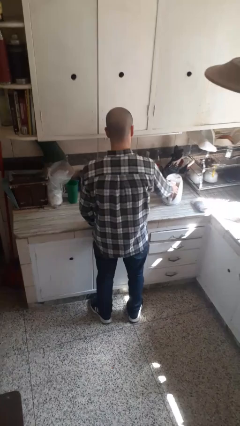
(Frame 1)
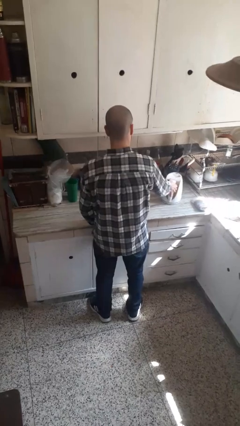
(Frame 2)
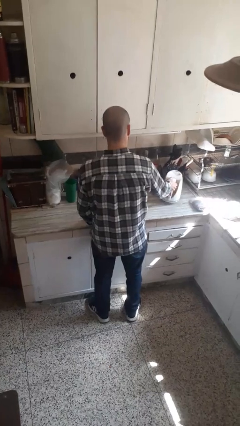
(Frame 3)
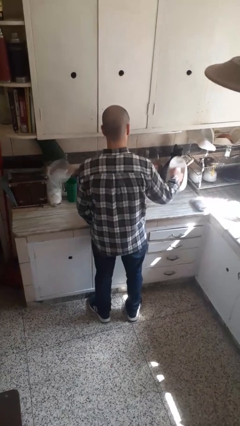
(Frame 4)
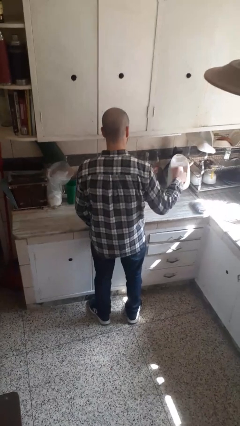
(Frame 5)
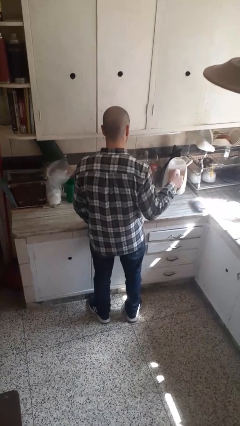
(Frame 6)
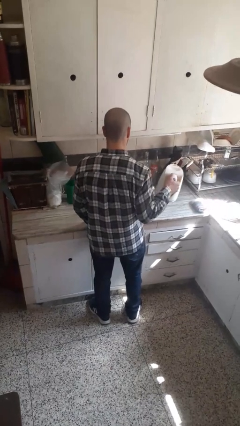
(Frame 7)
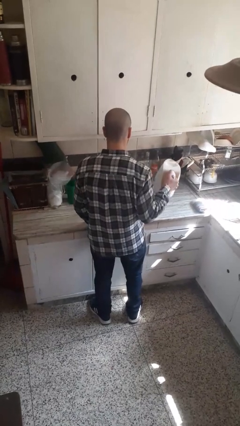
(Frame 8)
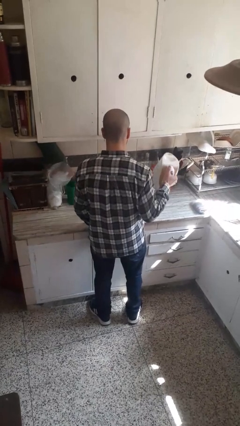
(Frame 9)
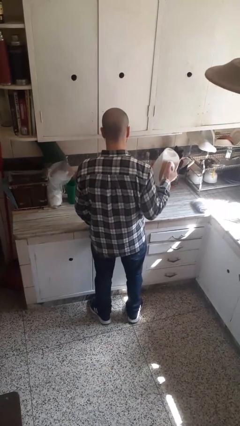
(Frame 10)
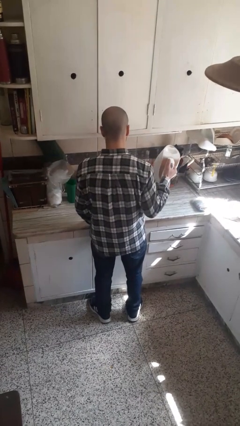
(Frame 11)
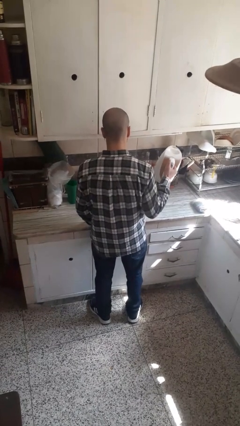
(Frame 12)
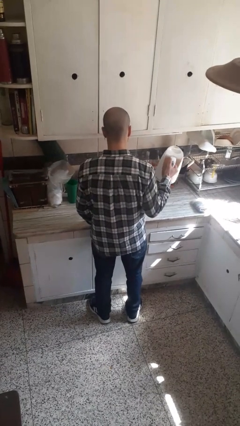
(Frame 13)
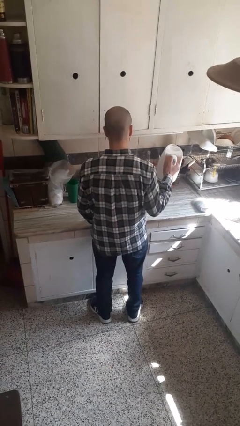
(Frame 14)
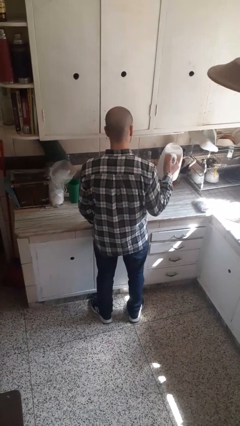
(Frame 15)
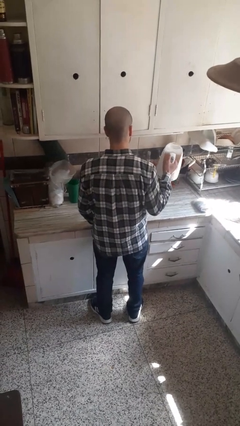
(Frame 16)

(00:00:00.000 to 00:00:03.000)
person picks up object from countertop

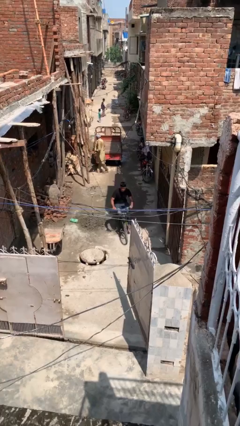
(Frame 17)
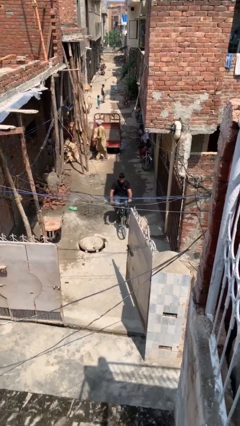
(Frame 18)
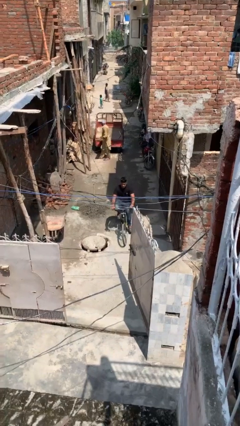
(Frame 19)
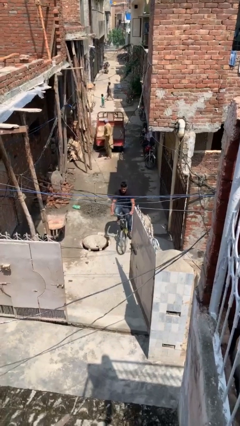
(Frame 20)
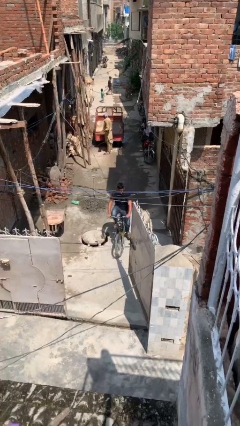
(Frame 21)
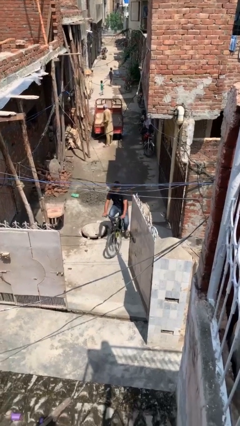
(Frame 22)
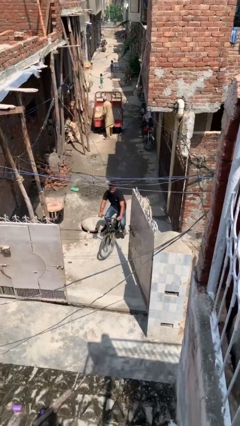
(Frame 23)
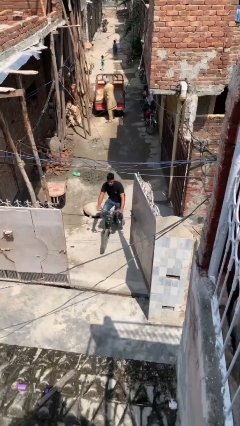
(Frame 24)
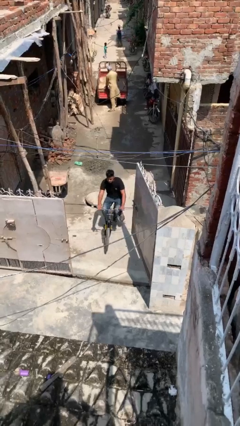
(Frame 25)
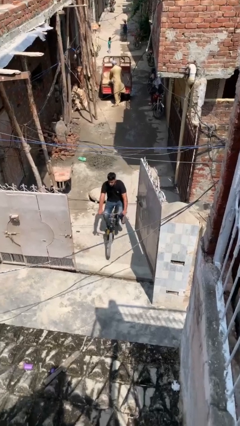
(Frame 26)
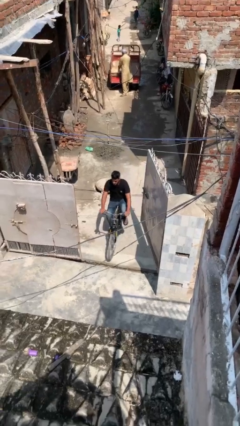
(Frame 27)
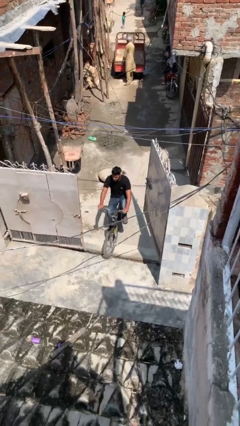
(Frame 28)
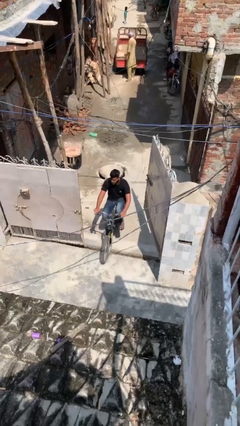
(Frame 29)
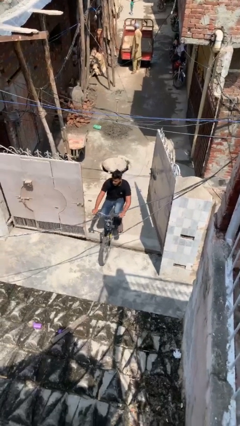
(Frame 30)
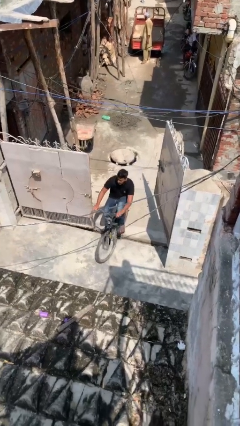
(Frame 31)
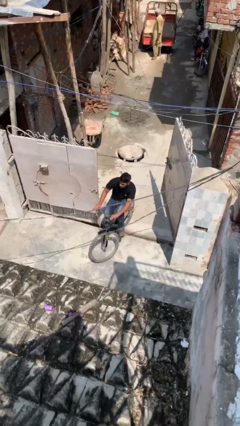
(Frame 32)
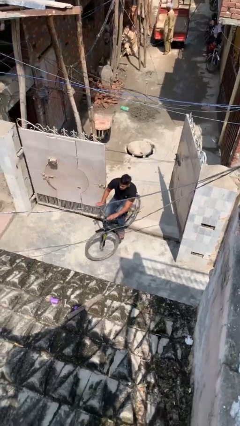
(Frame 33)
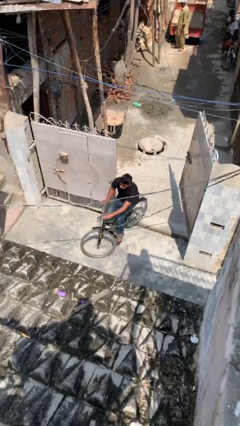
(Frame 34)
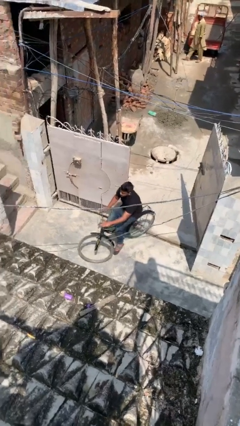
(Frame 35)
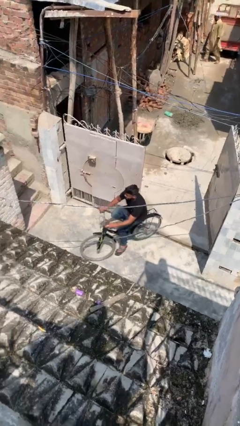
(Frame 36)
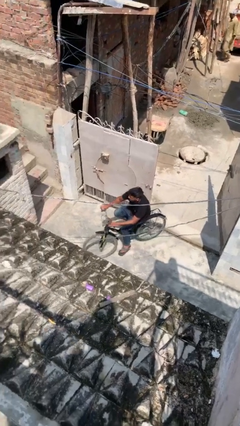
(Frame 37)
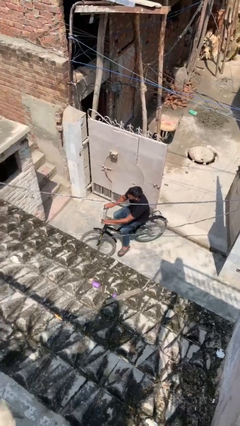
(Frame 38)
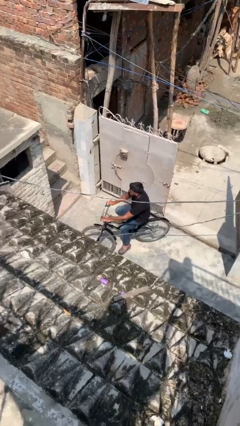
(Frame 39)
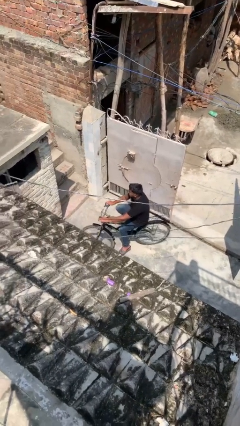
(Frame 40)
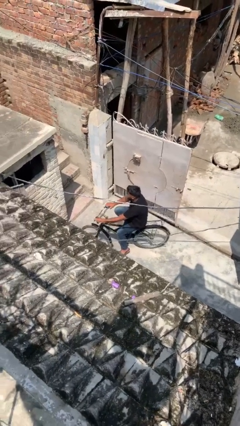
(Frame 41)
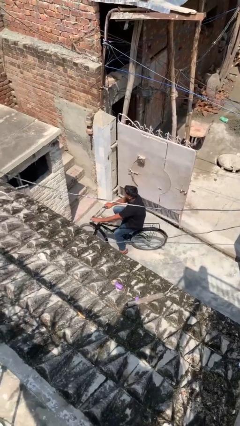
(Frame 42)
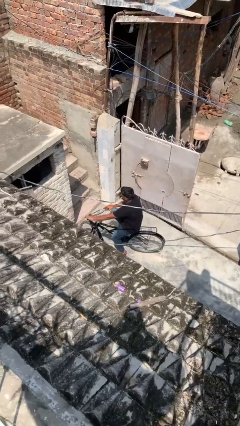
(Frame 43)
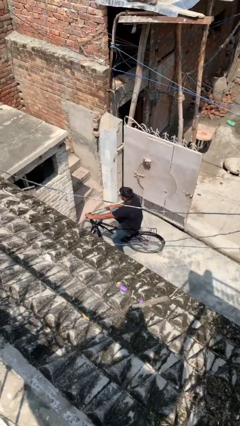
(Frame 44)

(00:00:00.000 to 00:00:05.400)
person rides bicycle

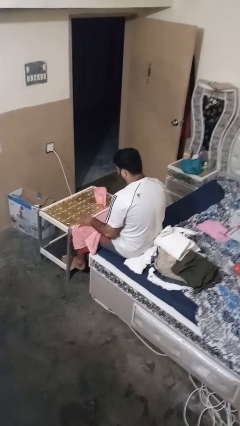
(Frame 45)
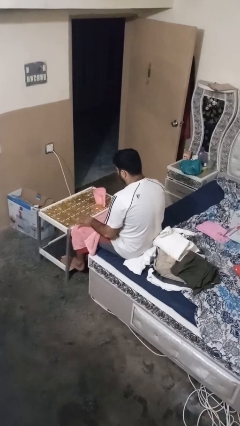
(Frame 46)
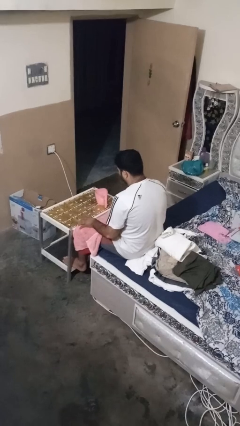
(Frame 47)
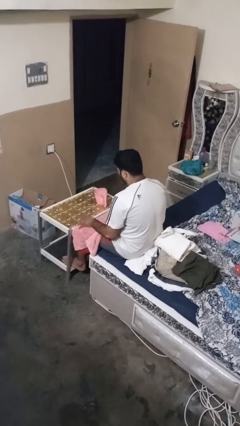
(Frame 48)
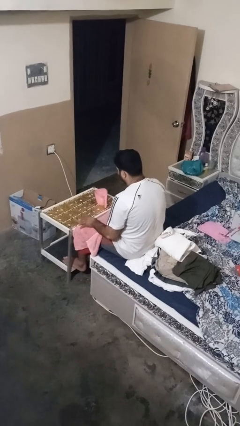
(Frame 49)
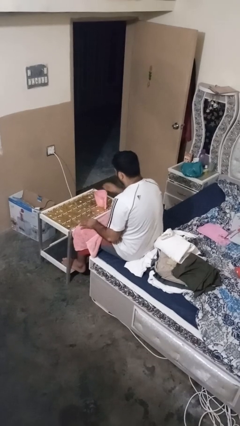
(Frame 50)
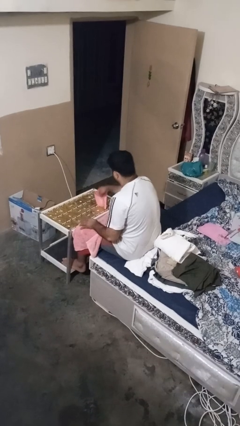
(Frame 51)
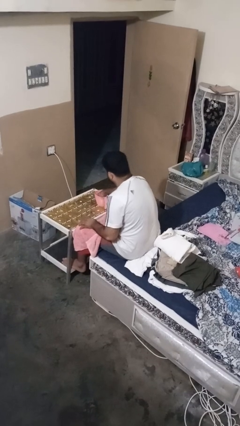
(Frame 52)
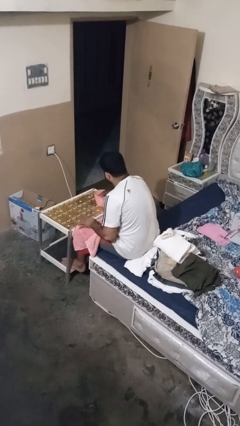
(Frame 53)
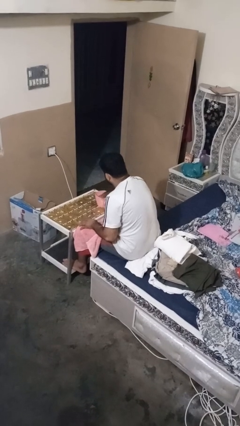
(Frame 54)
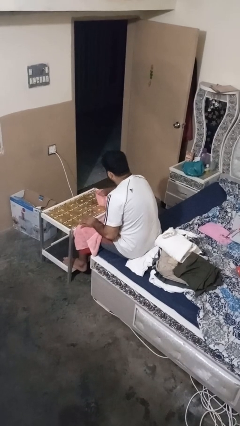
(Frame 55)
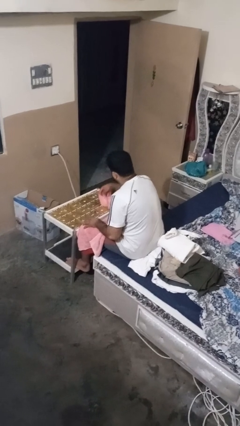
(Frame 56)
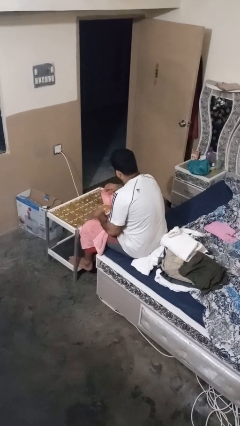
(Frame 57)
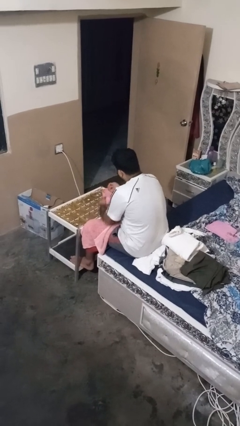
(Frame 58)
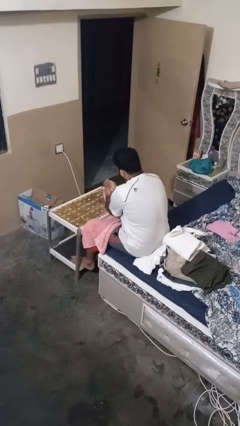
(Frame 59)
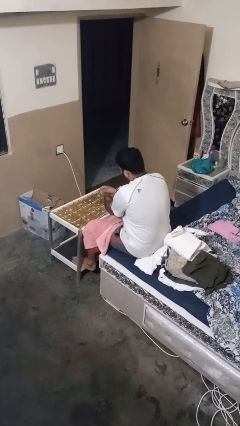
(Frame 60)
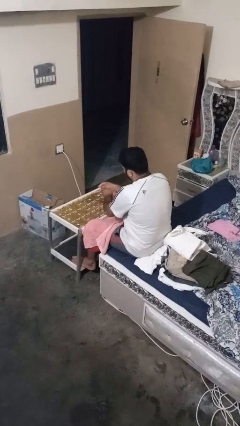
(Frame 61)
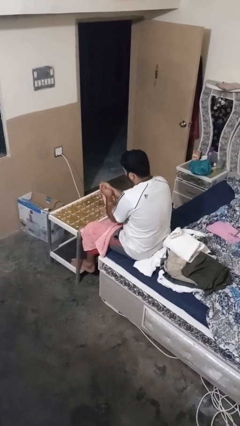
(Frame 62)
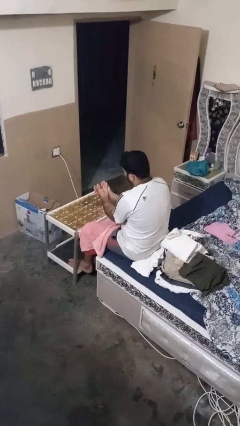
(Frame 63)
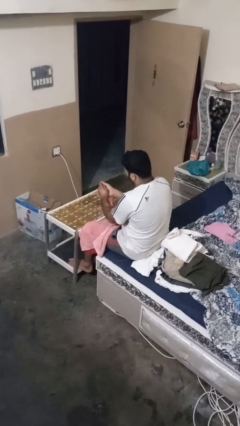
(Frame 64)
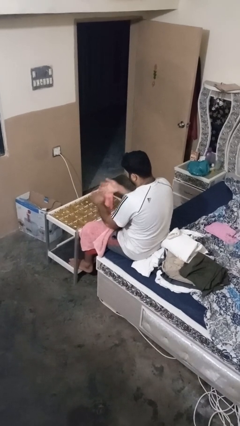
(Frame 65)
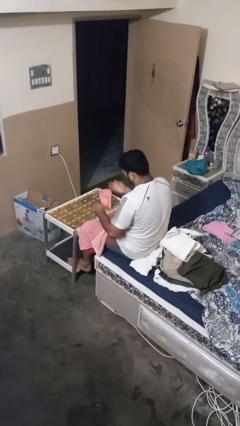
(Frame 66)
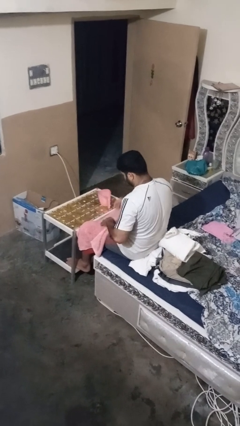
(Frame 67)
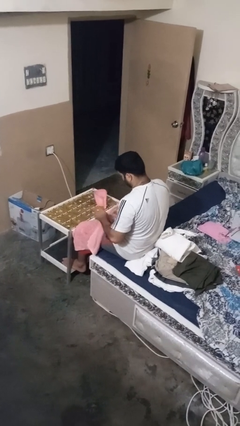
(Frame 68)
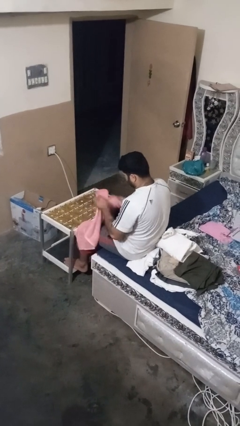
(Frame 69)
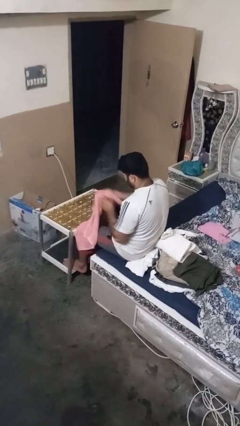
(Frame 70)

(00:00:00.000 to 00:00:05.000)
person washes hands

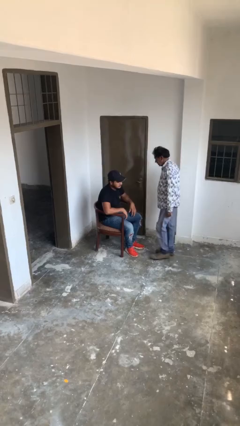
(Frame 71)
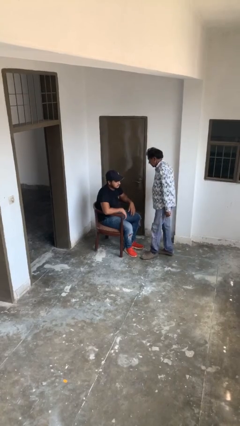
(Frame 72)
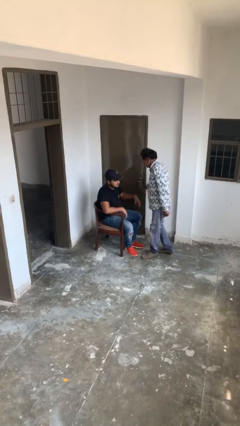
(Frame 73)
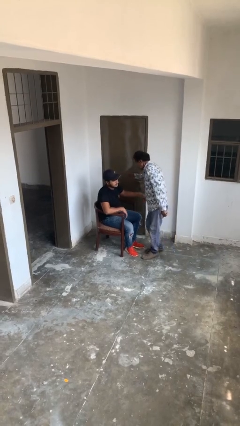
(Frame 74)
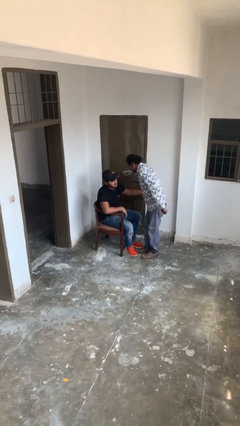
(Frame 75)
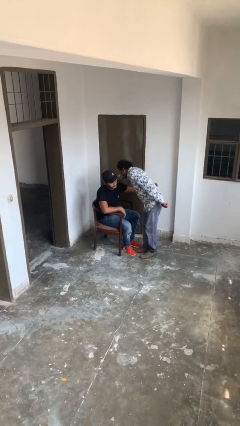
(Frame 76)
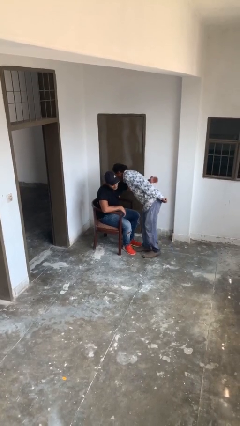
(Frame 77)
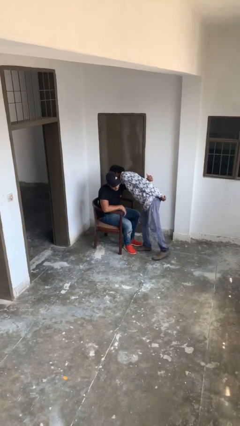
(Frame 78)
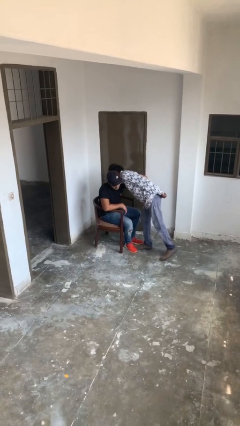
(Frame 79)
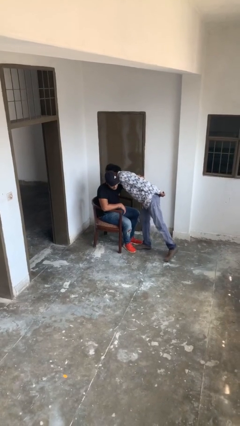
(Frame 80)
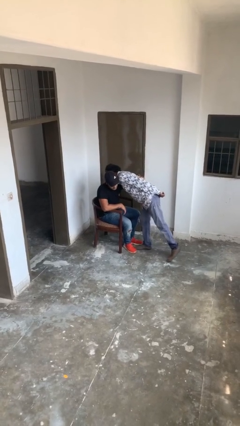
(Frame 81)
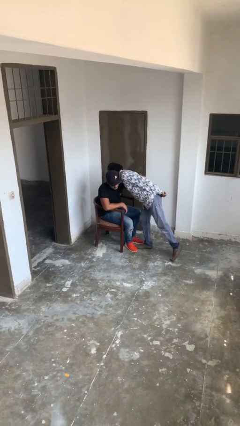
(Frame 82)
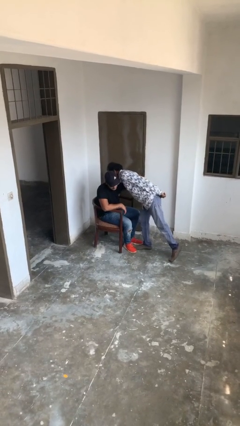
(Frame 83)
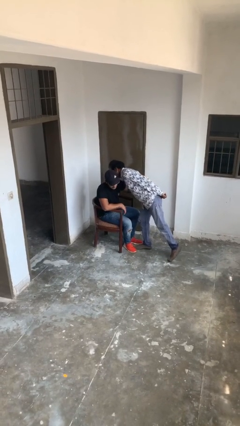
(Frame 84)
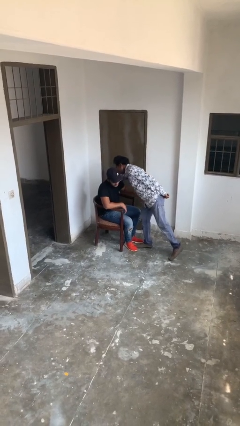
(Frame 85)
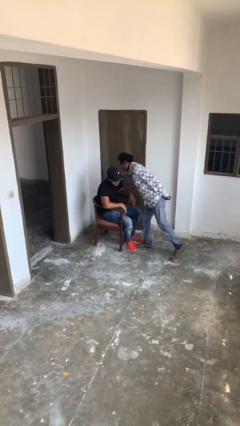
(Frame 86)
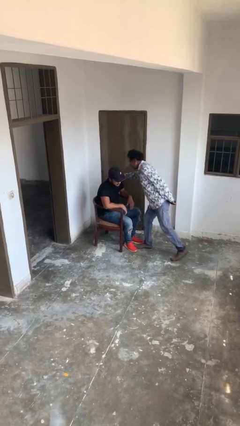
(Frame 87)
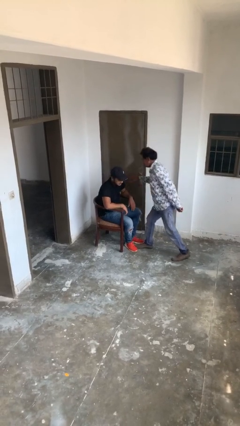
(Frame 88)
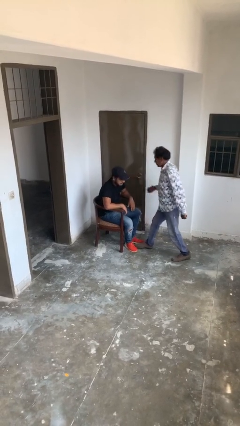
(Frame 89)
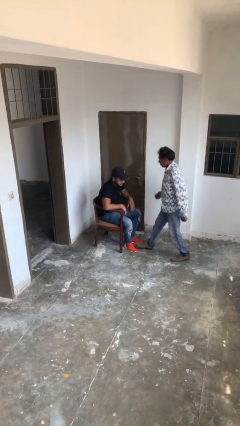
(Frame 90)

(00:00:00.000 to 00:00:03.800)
person embraces person

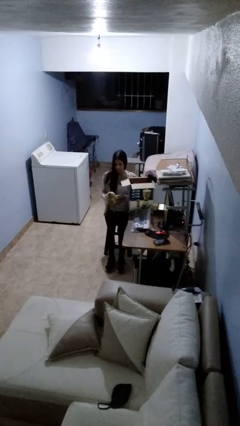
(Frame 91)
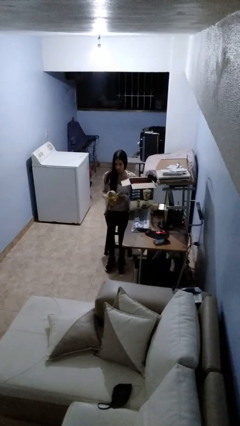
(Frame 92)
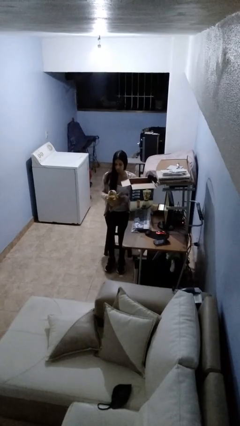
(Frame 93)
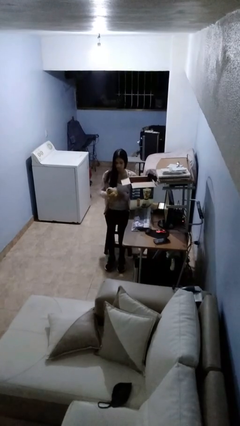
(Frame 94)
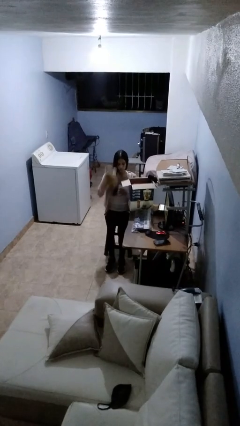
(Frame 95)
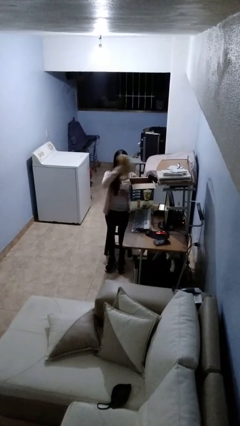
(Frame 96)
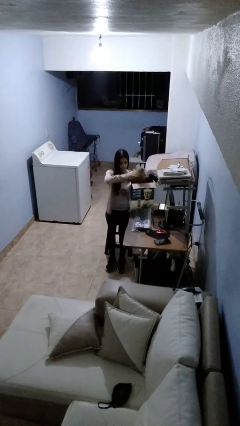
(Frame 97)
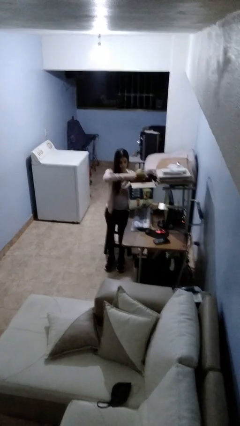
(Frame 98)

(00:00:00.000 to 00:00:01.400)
person puts object into box
